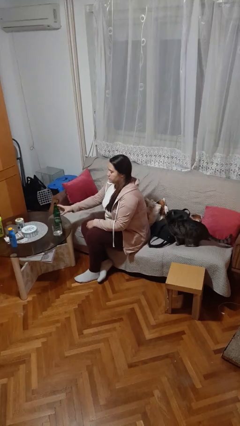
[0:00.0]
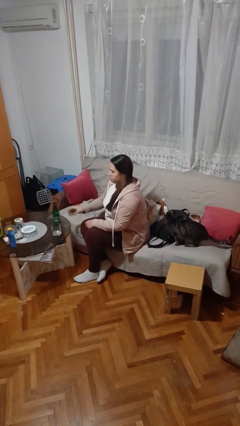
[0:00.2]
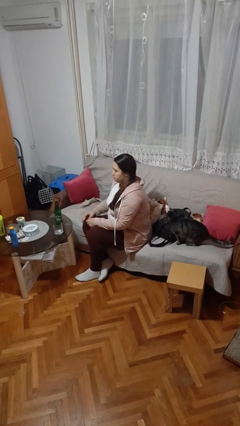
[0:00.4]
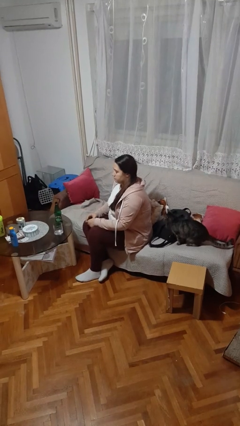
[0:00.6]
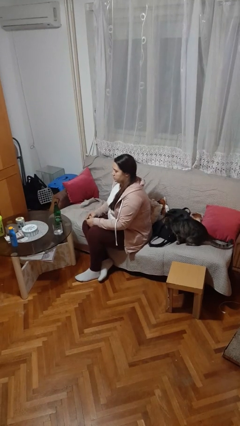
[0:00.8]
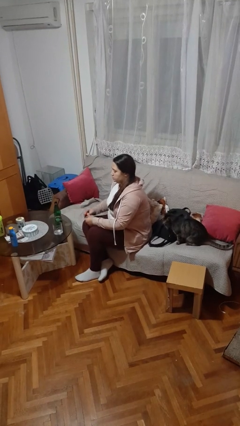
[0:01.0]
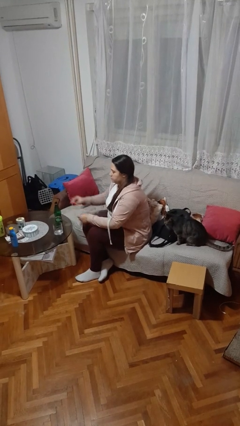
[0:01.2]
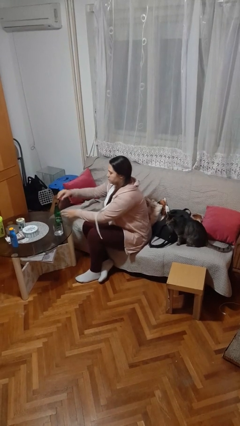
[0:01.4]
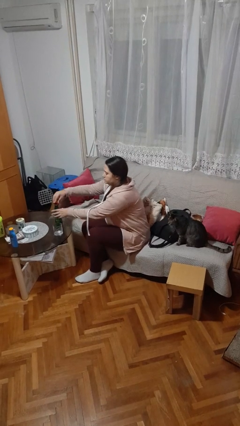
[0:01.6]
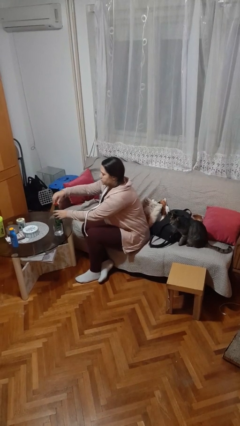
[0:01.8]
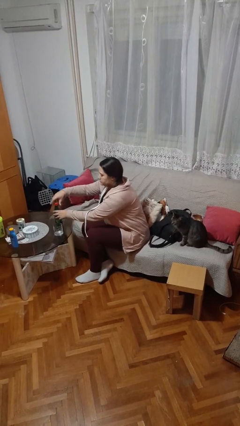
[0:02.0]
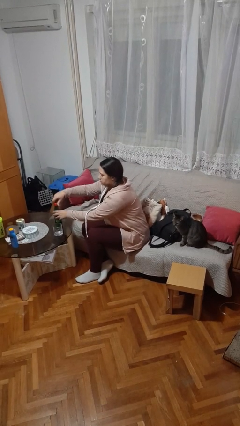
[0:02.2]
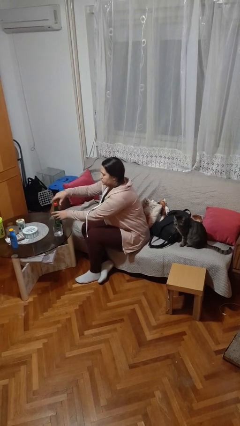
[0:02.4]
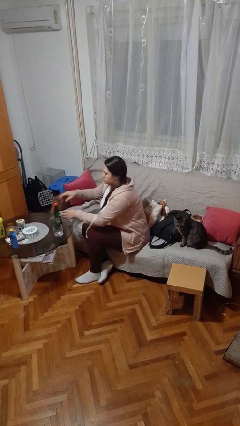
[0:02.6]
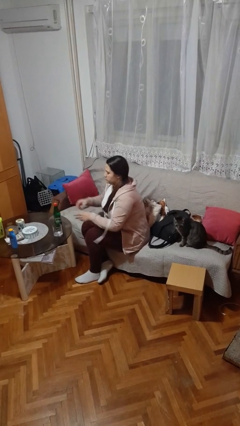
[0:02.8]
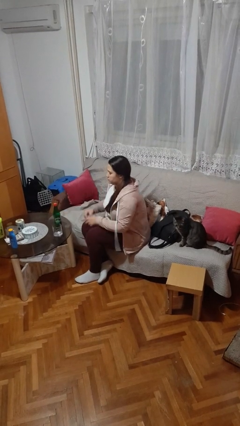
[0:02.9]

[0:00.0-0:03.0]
person screws lid to bottle

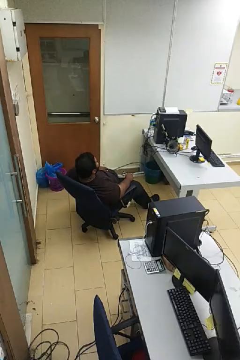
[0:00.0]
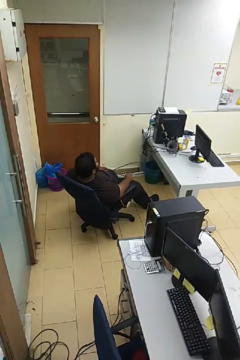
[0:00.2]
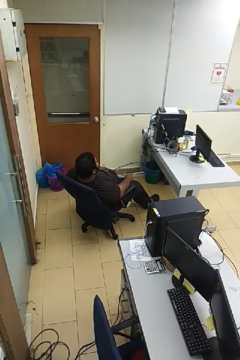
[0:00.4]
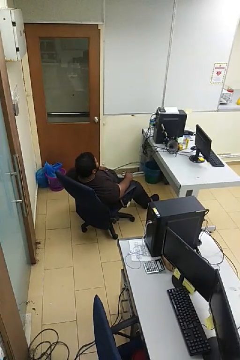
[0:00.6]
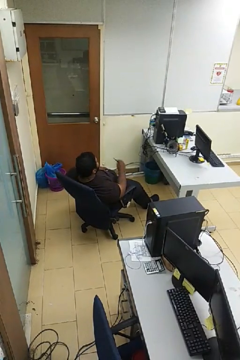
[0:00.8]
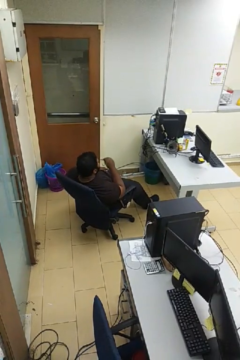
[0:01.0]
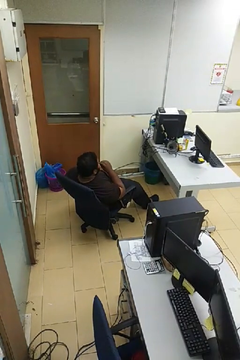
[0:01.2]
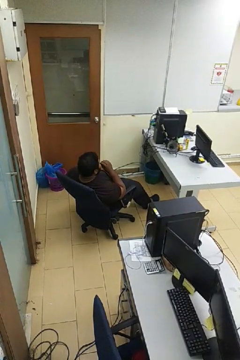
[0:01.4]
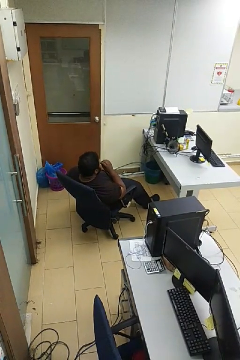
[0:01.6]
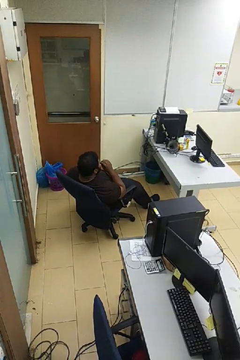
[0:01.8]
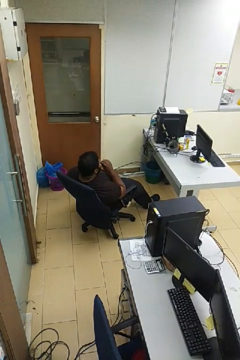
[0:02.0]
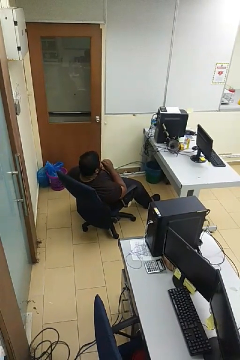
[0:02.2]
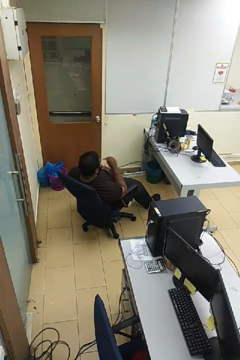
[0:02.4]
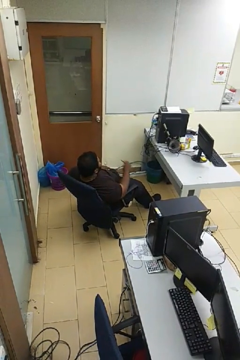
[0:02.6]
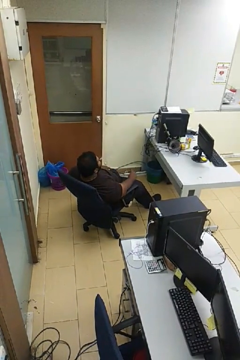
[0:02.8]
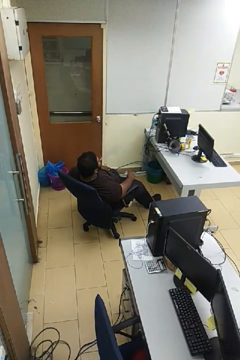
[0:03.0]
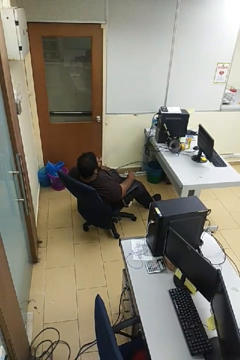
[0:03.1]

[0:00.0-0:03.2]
person vapes

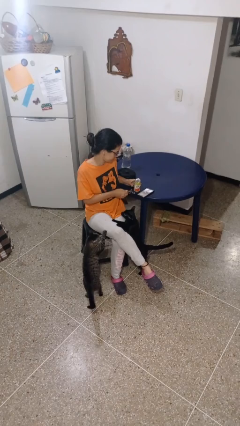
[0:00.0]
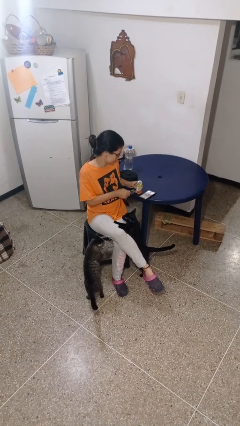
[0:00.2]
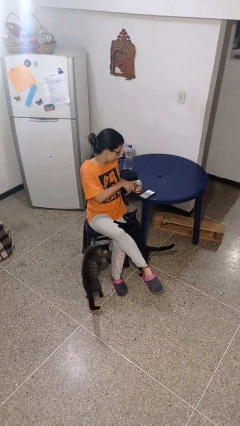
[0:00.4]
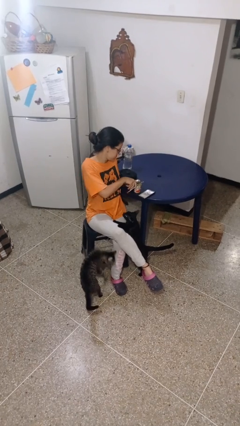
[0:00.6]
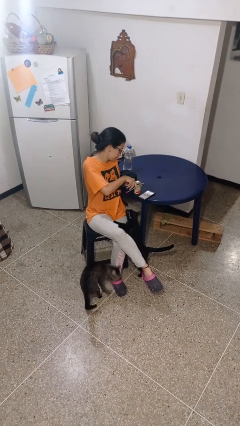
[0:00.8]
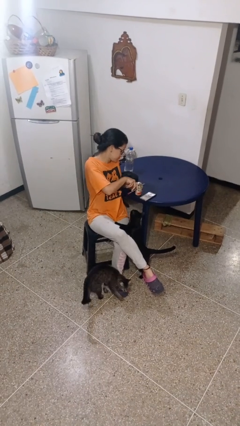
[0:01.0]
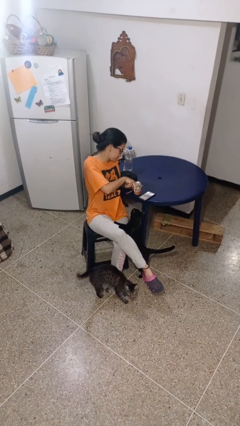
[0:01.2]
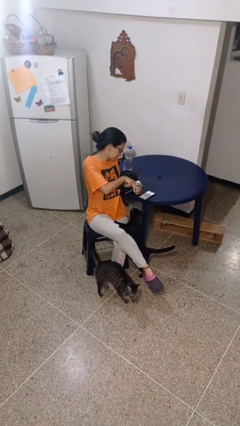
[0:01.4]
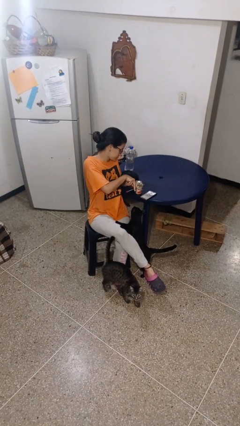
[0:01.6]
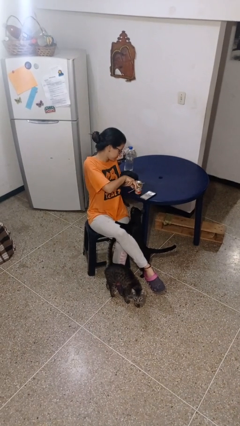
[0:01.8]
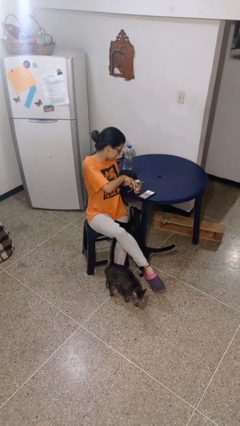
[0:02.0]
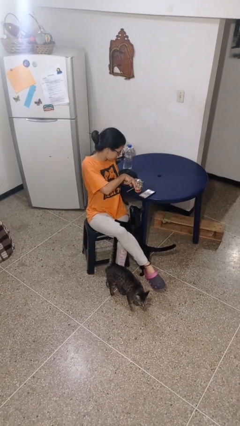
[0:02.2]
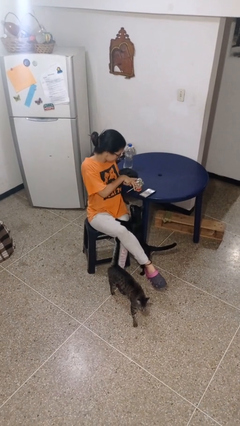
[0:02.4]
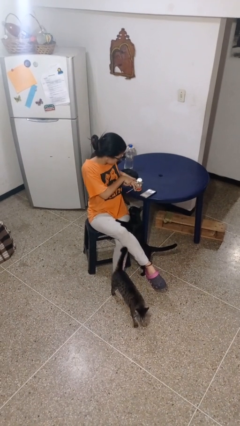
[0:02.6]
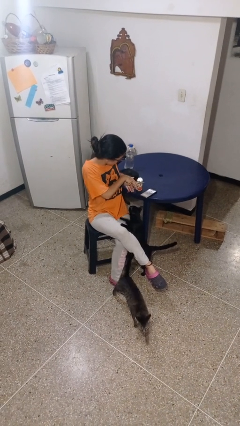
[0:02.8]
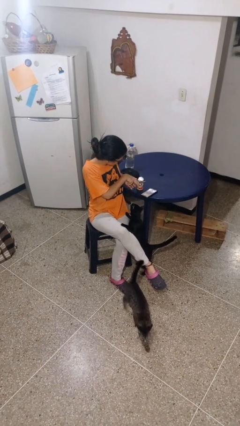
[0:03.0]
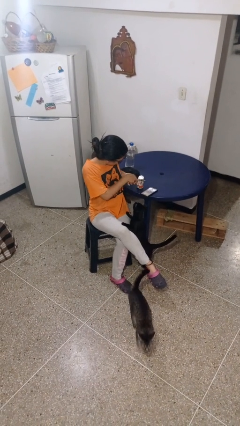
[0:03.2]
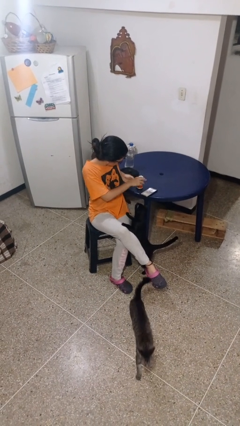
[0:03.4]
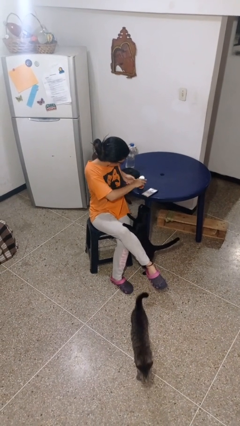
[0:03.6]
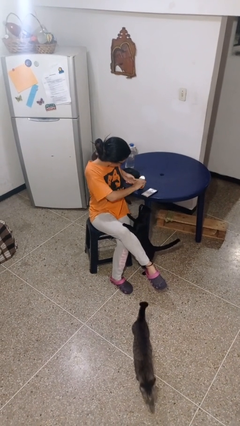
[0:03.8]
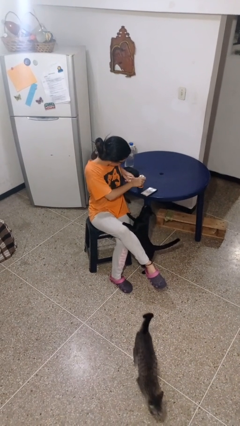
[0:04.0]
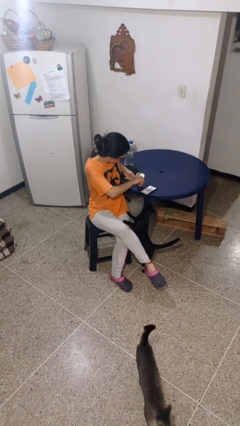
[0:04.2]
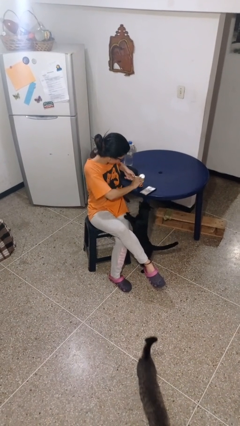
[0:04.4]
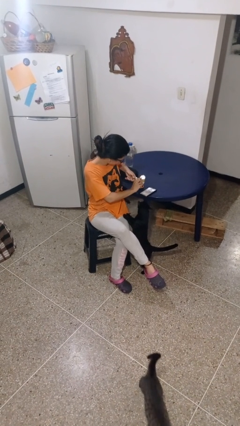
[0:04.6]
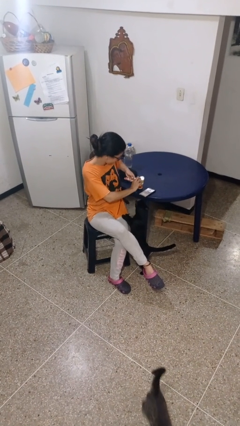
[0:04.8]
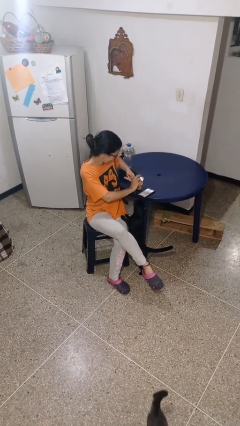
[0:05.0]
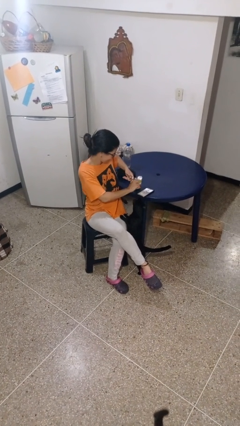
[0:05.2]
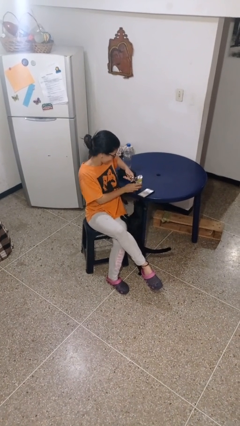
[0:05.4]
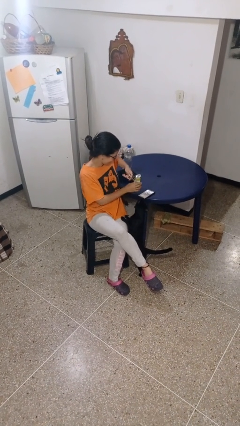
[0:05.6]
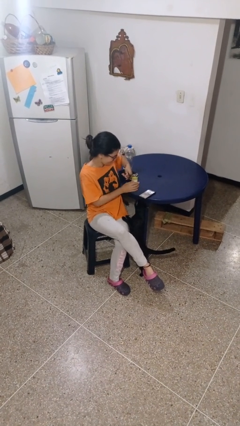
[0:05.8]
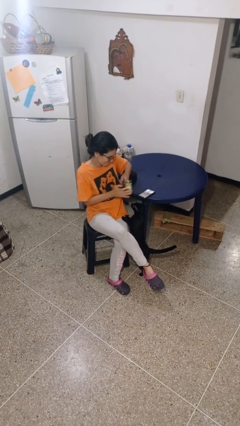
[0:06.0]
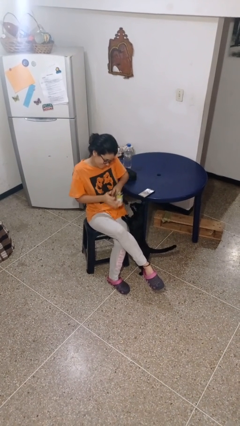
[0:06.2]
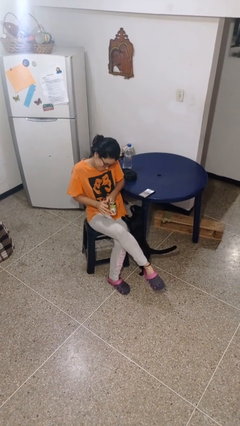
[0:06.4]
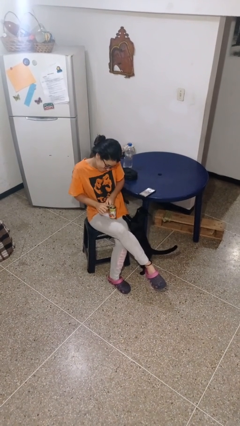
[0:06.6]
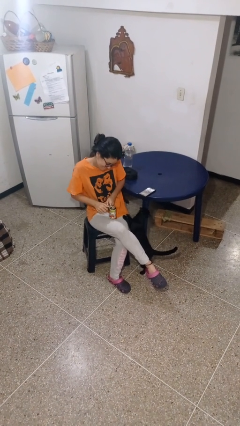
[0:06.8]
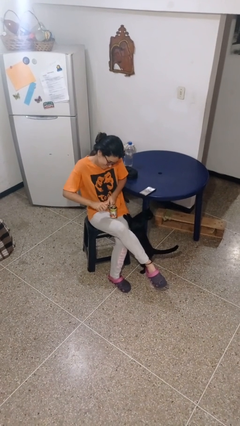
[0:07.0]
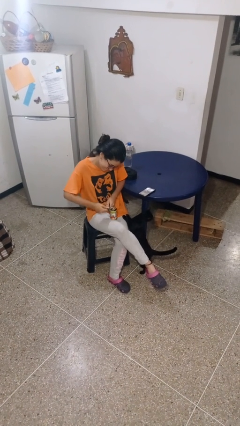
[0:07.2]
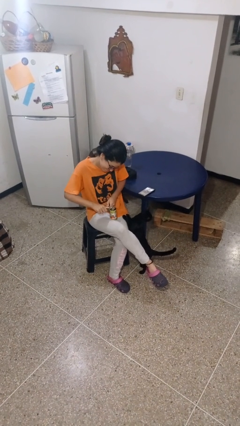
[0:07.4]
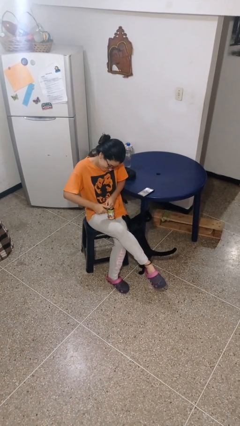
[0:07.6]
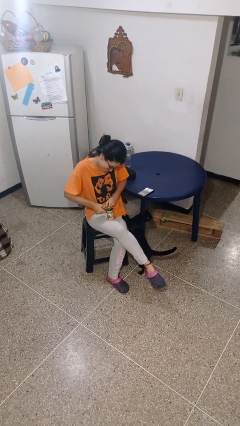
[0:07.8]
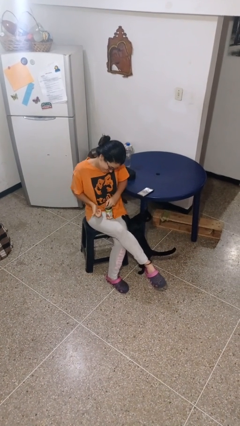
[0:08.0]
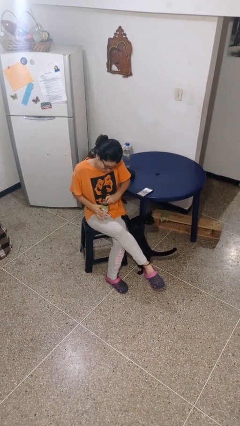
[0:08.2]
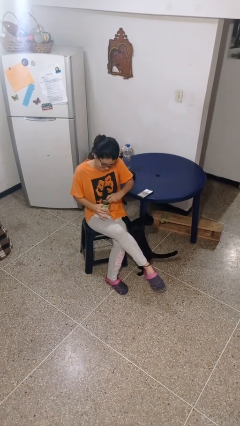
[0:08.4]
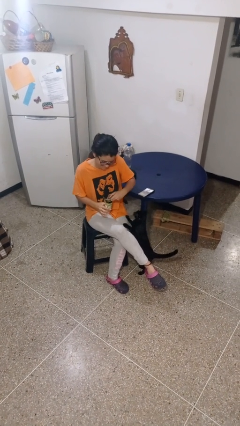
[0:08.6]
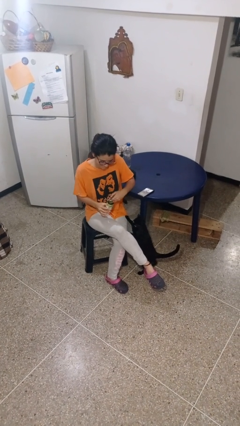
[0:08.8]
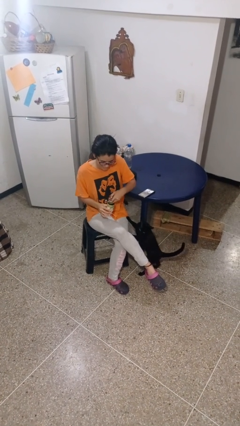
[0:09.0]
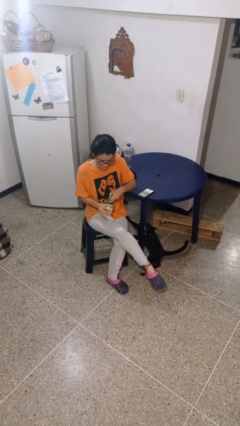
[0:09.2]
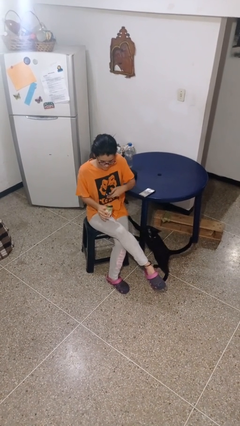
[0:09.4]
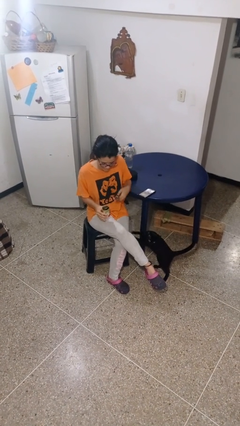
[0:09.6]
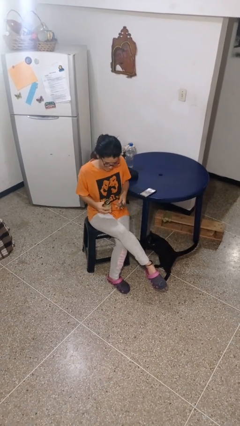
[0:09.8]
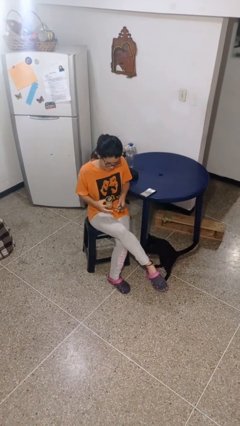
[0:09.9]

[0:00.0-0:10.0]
person opens can with can opener

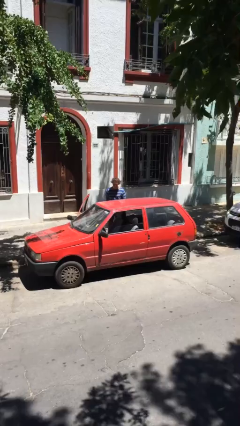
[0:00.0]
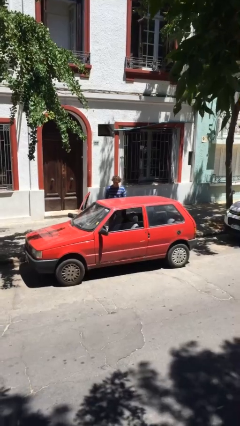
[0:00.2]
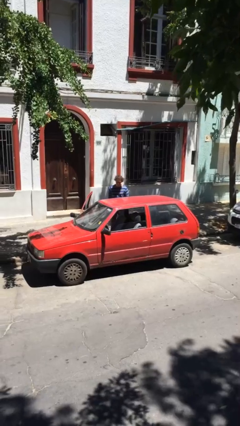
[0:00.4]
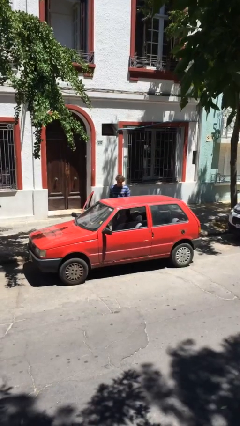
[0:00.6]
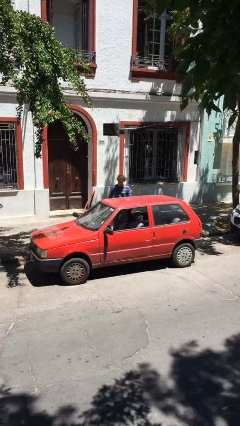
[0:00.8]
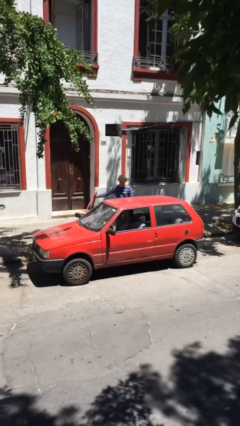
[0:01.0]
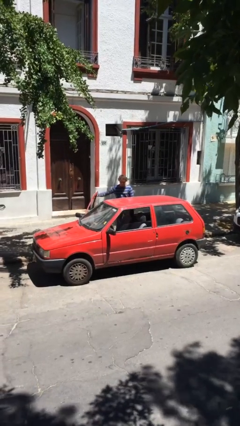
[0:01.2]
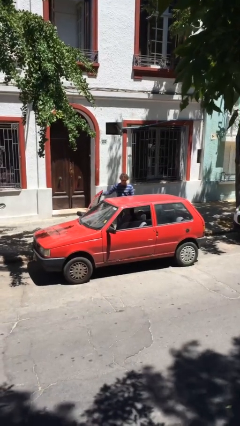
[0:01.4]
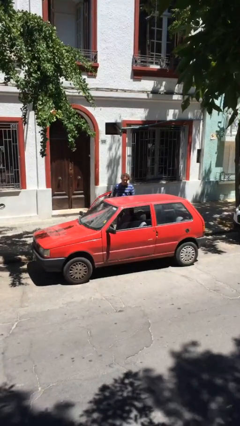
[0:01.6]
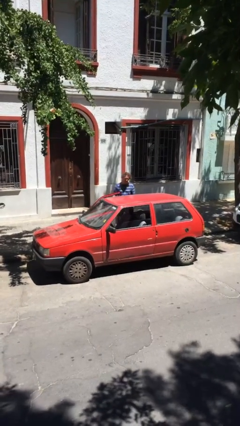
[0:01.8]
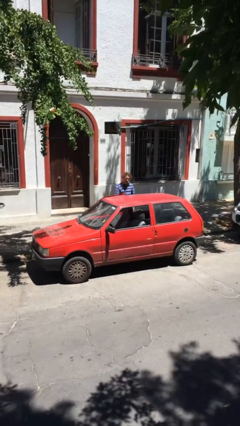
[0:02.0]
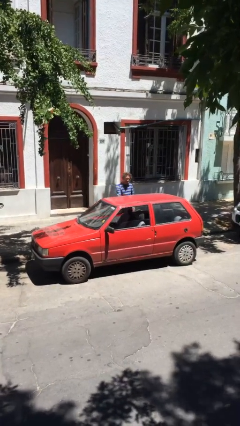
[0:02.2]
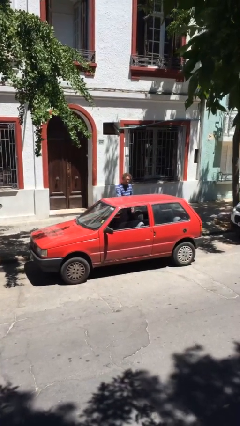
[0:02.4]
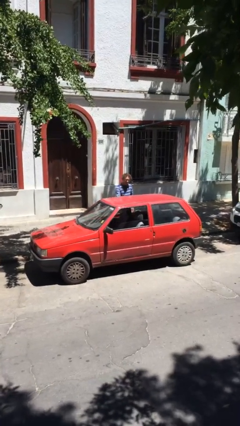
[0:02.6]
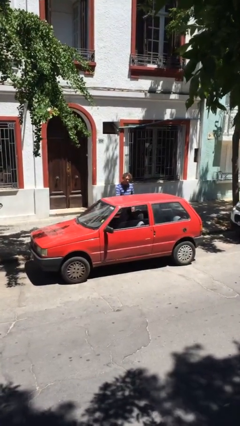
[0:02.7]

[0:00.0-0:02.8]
person closes car door
